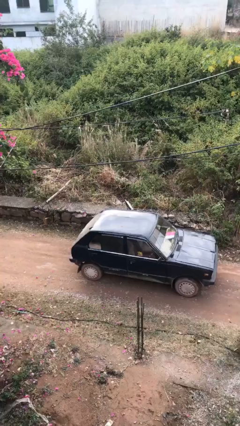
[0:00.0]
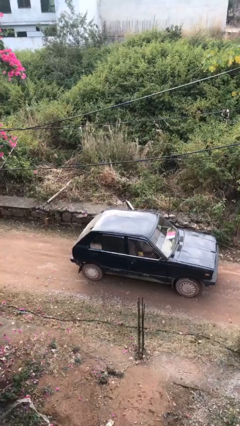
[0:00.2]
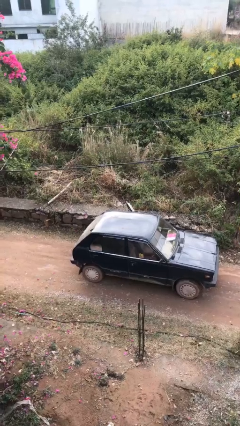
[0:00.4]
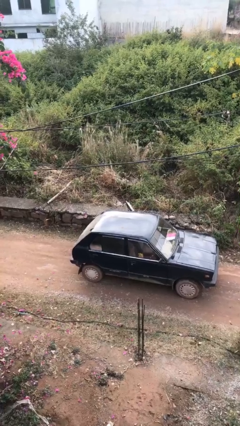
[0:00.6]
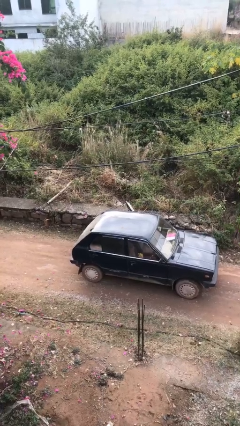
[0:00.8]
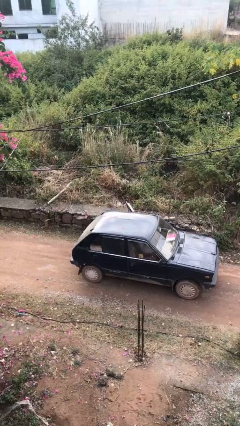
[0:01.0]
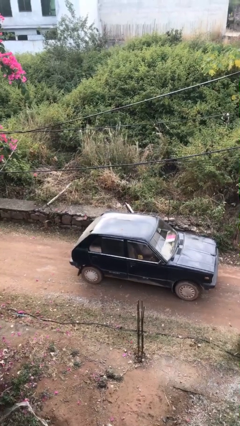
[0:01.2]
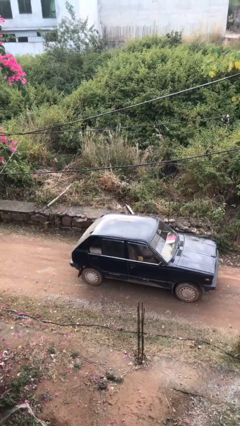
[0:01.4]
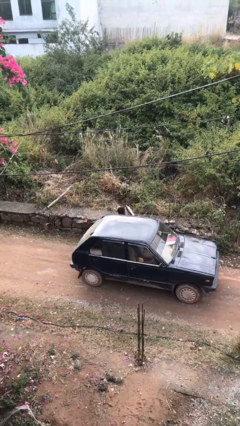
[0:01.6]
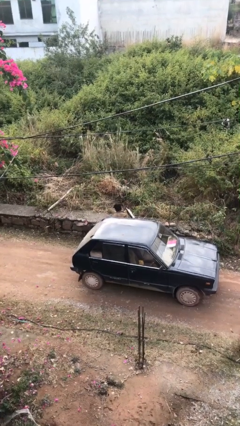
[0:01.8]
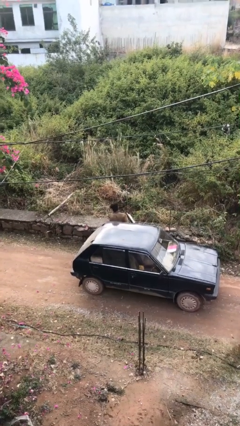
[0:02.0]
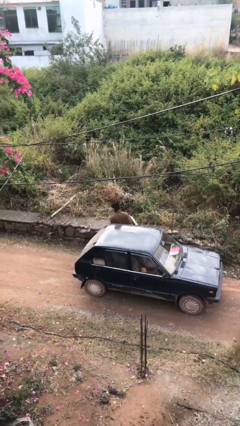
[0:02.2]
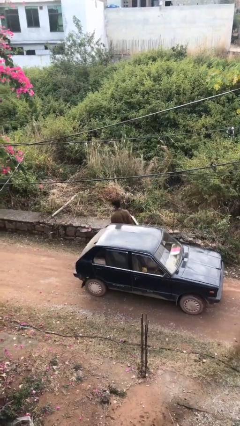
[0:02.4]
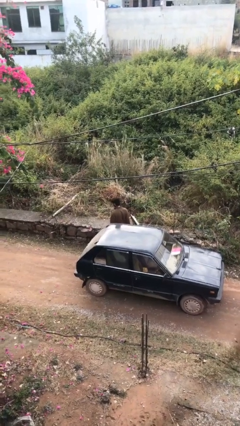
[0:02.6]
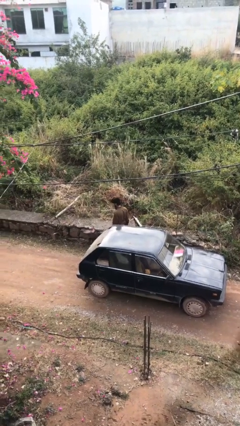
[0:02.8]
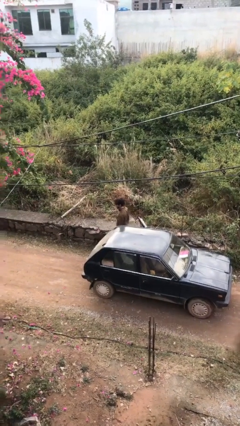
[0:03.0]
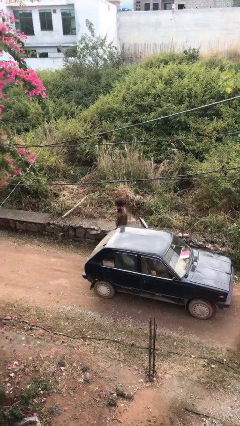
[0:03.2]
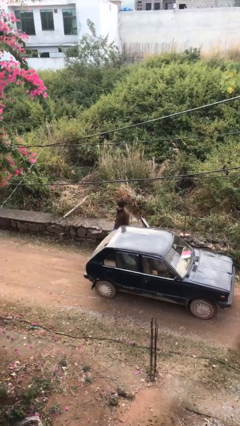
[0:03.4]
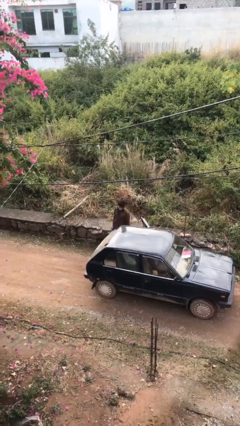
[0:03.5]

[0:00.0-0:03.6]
person exits car

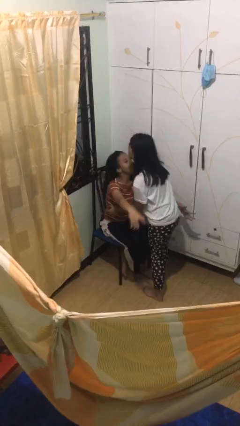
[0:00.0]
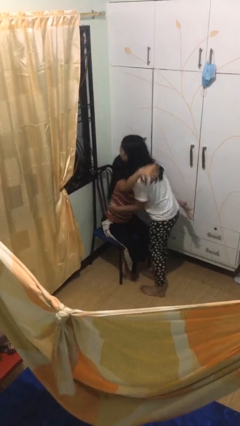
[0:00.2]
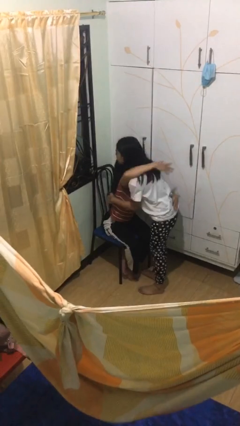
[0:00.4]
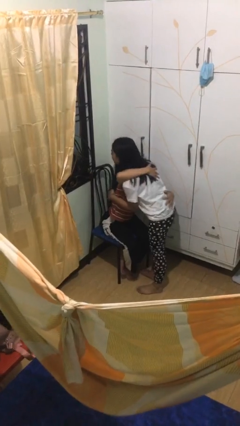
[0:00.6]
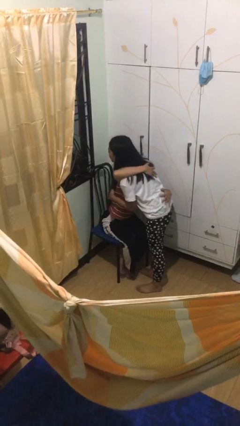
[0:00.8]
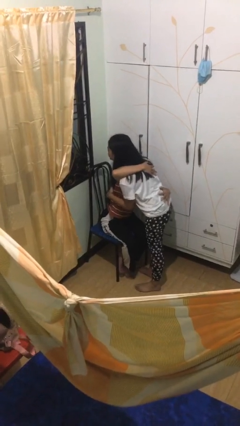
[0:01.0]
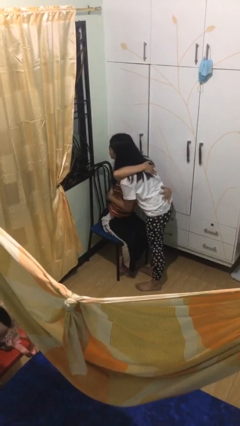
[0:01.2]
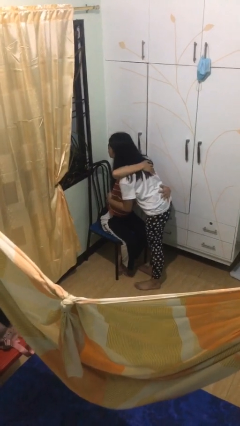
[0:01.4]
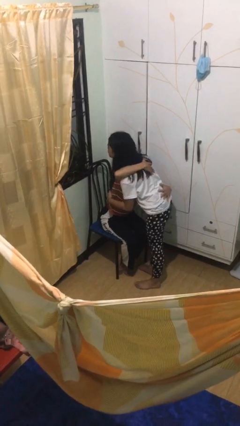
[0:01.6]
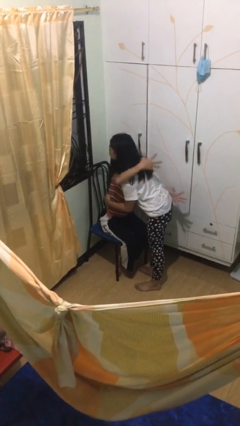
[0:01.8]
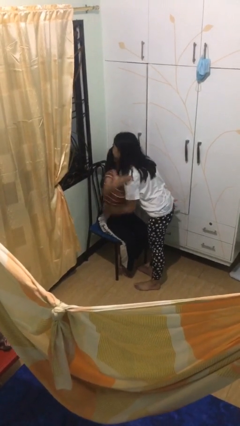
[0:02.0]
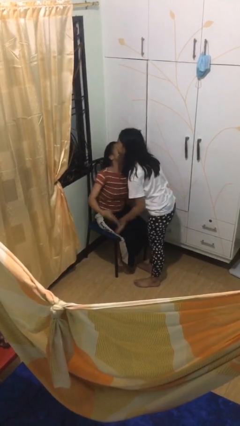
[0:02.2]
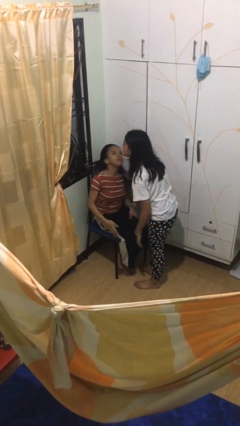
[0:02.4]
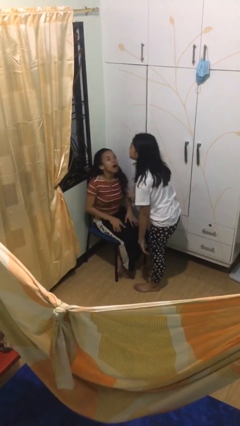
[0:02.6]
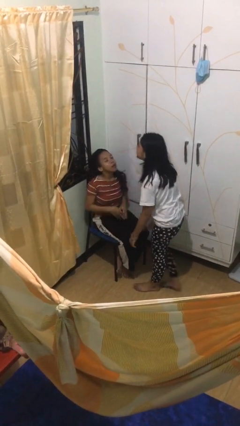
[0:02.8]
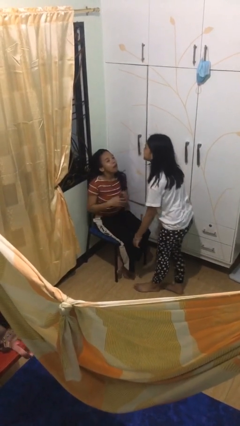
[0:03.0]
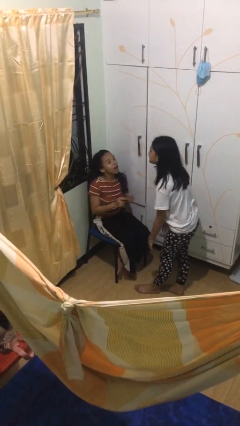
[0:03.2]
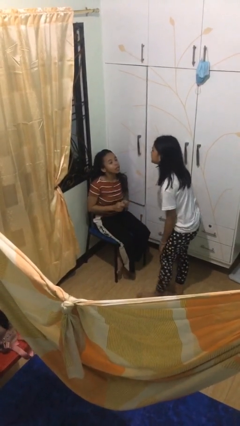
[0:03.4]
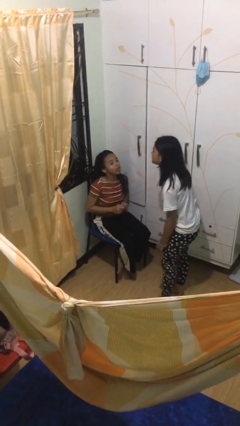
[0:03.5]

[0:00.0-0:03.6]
person embraces person

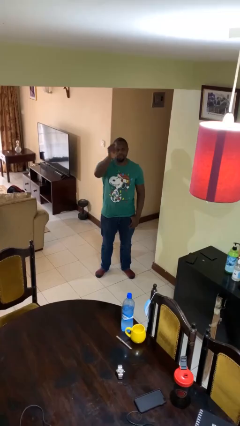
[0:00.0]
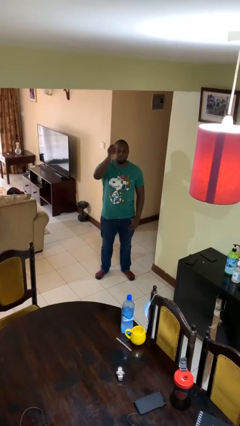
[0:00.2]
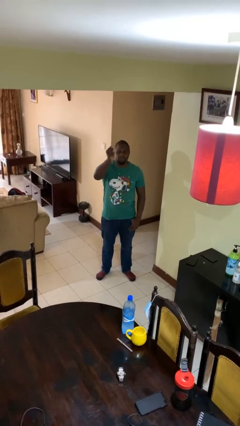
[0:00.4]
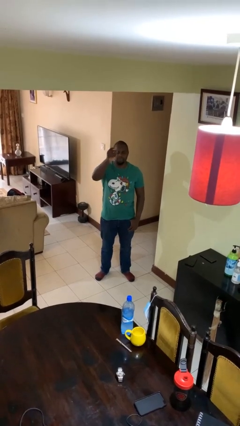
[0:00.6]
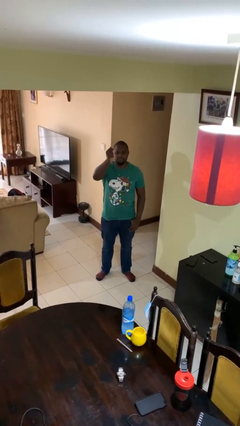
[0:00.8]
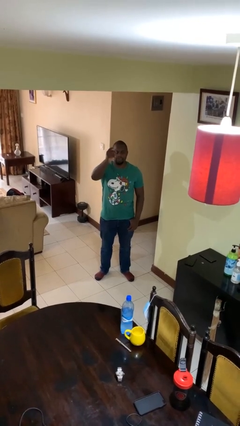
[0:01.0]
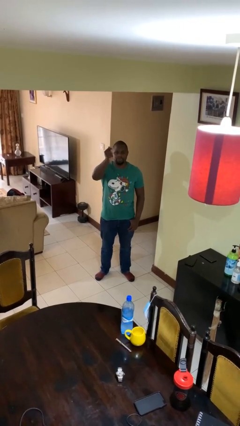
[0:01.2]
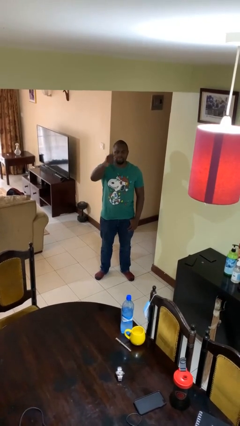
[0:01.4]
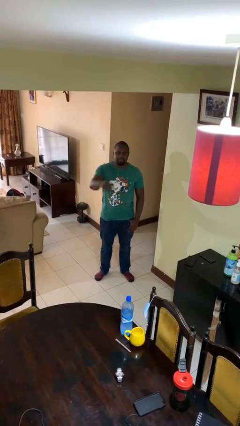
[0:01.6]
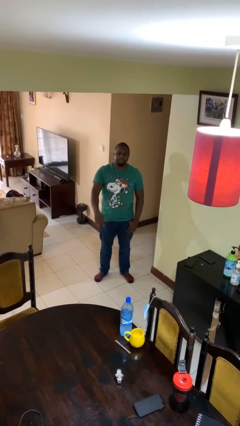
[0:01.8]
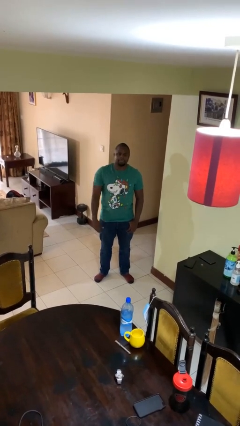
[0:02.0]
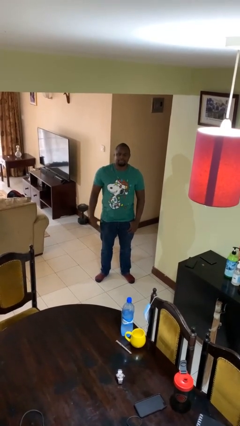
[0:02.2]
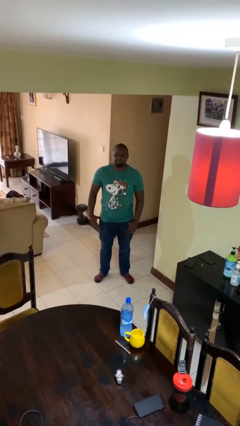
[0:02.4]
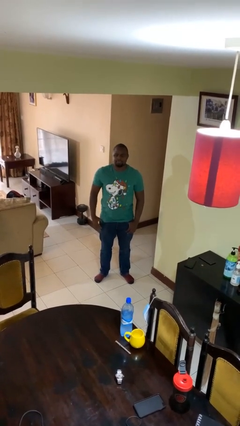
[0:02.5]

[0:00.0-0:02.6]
person snaps fingers

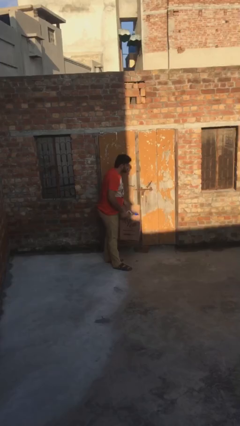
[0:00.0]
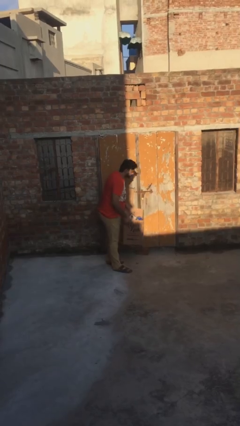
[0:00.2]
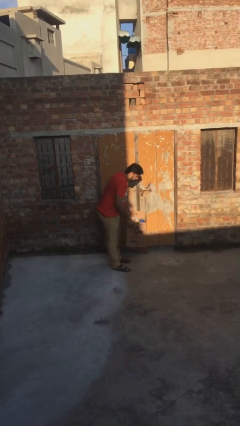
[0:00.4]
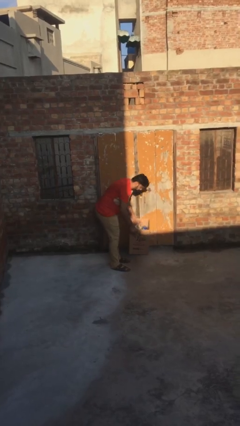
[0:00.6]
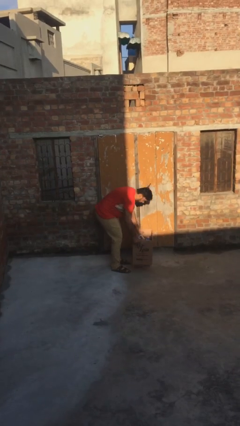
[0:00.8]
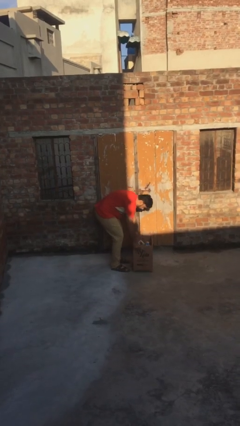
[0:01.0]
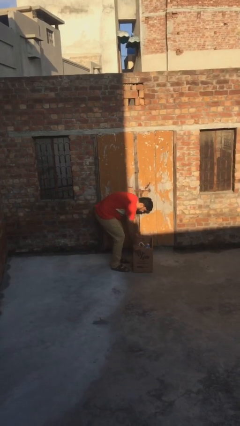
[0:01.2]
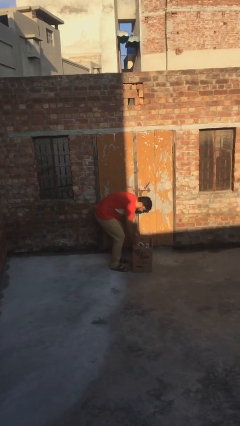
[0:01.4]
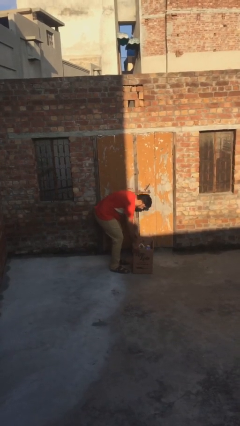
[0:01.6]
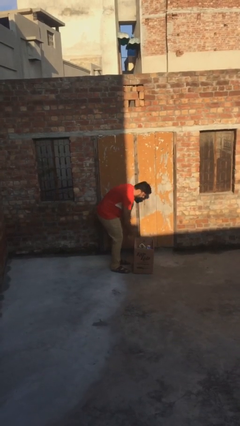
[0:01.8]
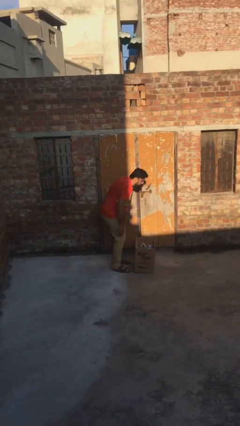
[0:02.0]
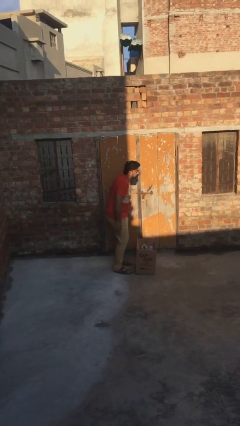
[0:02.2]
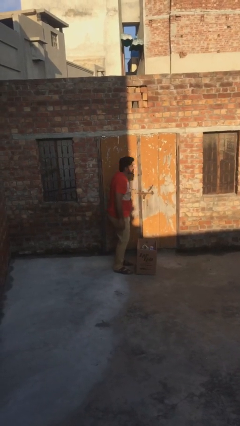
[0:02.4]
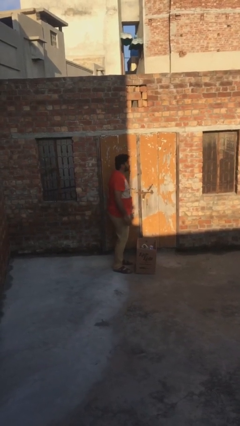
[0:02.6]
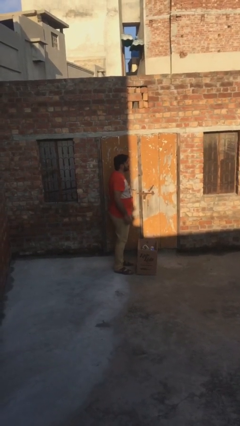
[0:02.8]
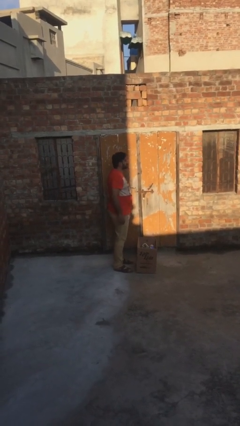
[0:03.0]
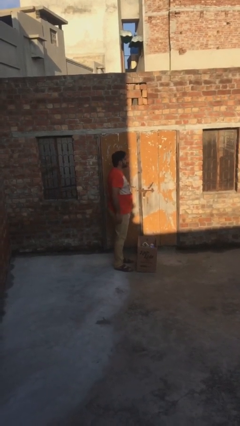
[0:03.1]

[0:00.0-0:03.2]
person puts down object on floor

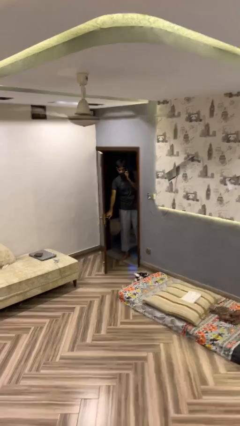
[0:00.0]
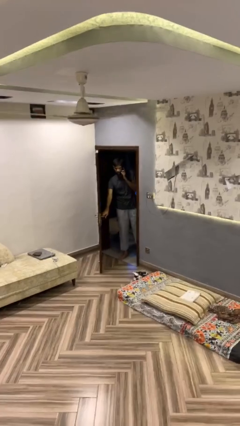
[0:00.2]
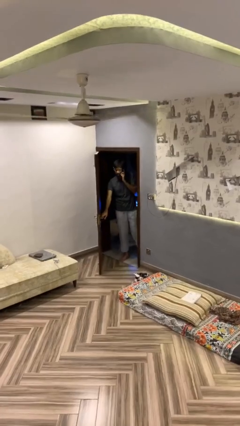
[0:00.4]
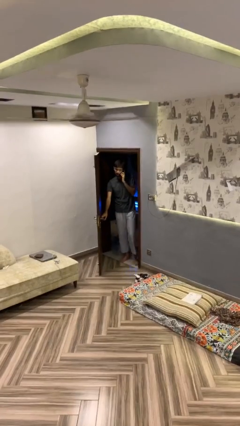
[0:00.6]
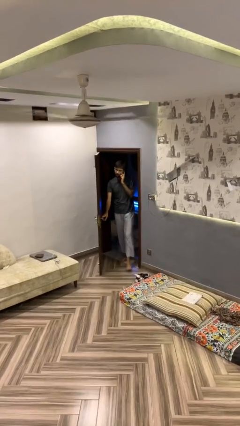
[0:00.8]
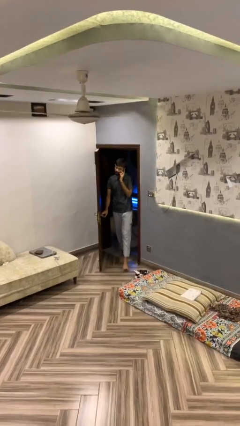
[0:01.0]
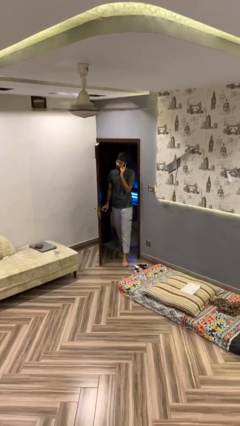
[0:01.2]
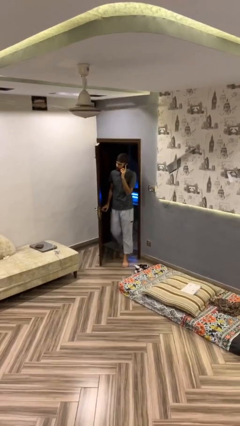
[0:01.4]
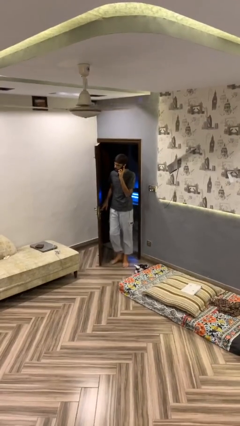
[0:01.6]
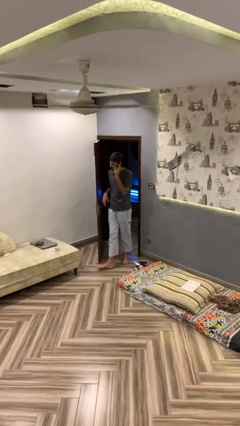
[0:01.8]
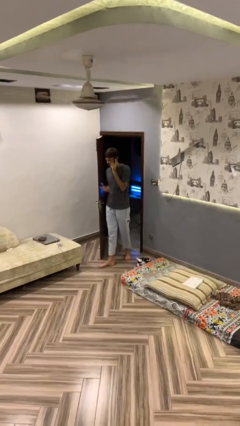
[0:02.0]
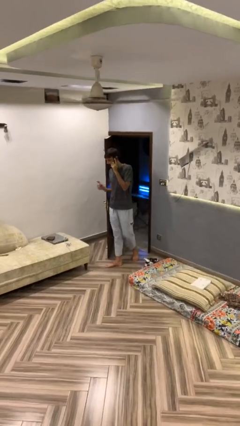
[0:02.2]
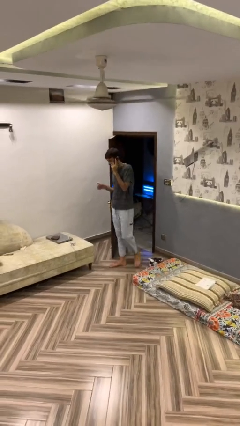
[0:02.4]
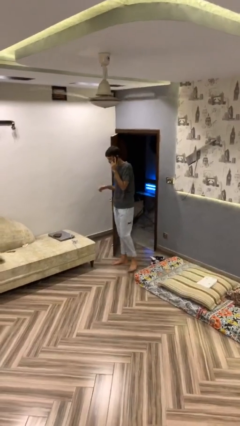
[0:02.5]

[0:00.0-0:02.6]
person enters scene through structure

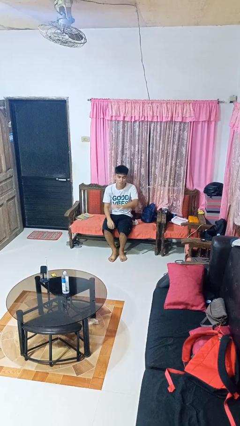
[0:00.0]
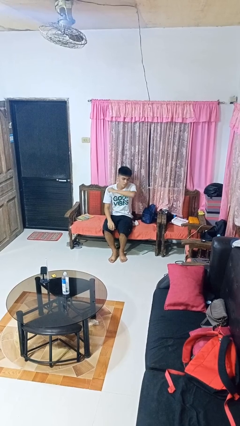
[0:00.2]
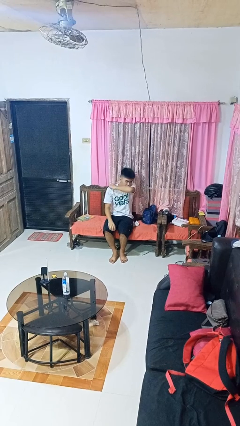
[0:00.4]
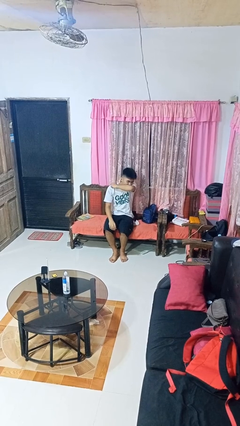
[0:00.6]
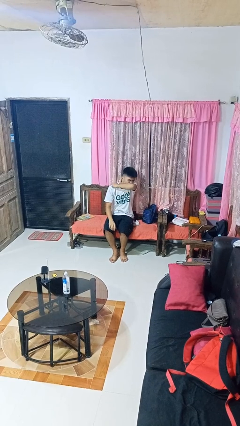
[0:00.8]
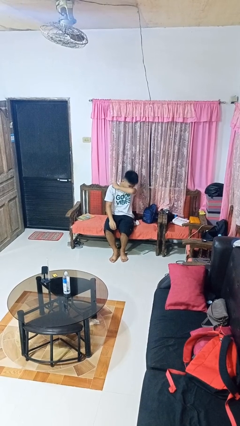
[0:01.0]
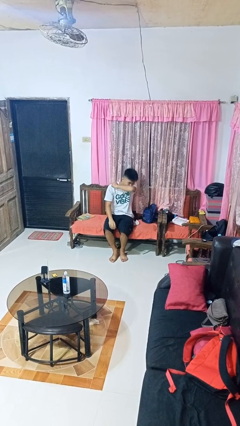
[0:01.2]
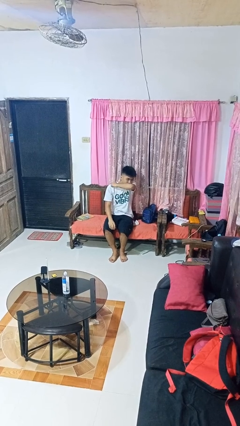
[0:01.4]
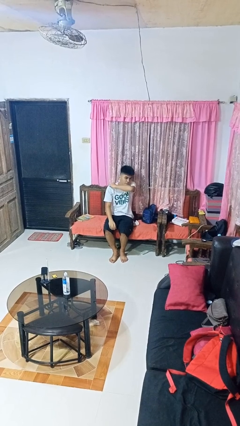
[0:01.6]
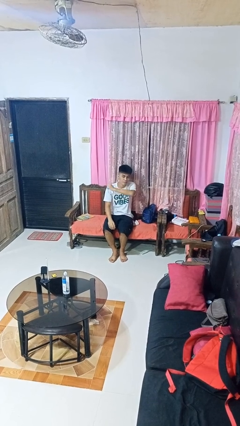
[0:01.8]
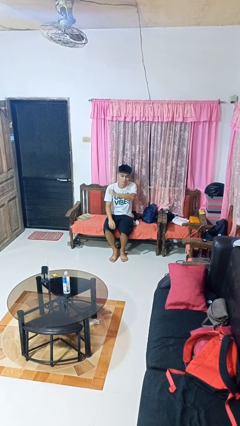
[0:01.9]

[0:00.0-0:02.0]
person sneezes into arm
